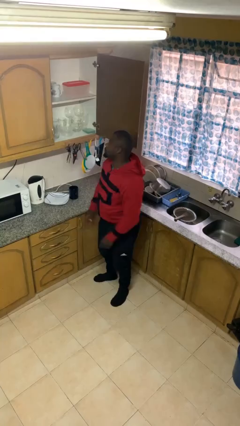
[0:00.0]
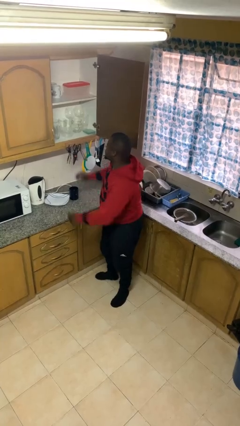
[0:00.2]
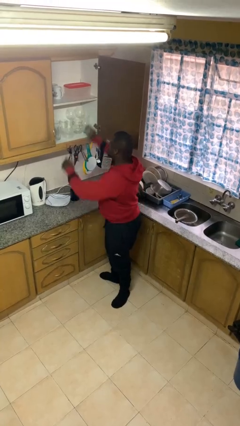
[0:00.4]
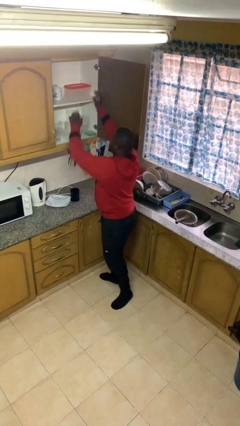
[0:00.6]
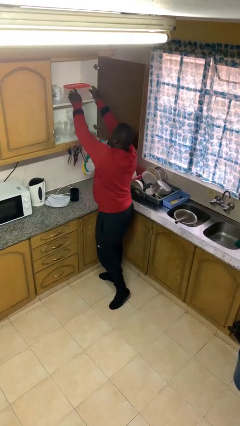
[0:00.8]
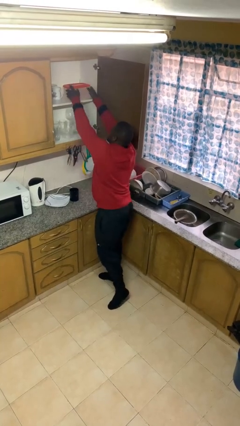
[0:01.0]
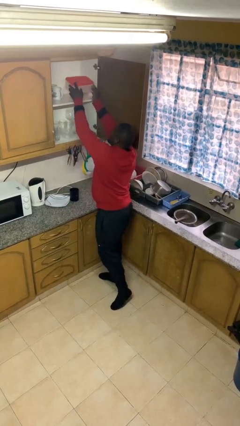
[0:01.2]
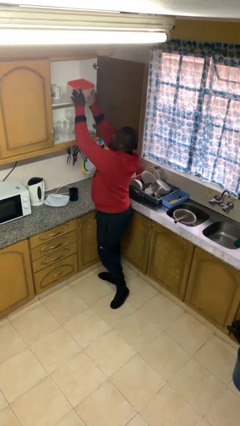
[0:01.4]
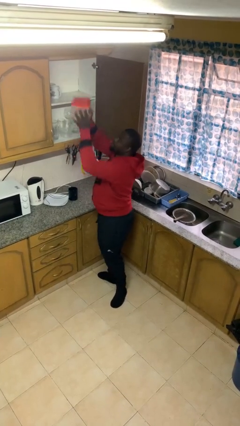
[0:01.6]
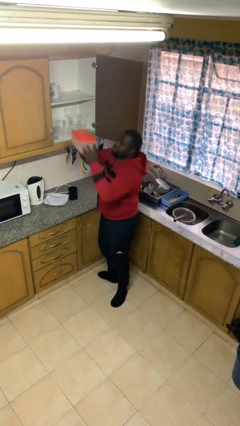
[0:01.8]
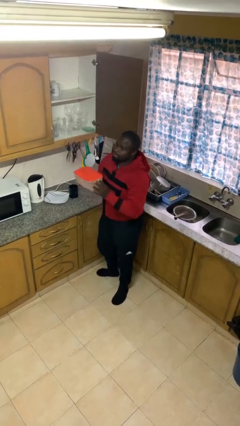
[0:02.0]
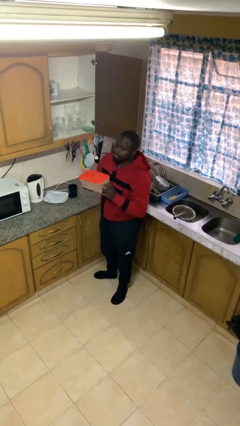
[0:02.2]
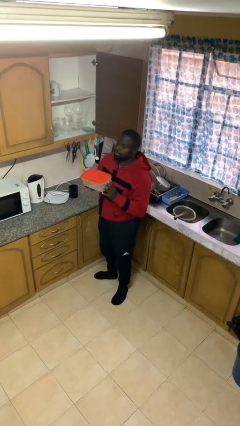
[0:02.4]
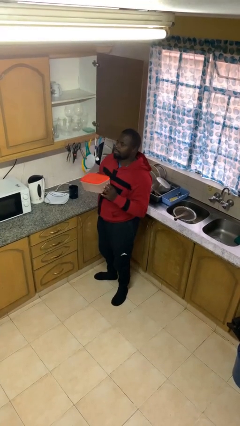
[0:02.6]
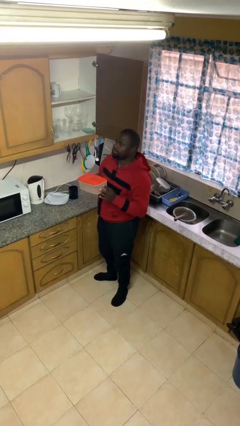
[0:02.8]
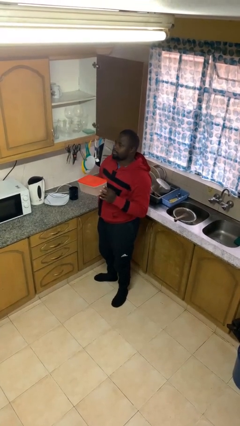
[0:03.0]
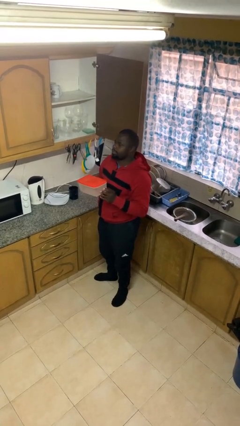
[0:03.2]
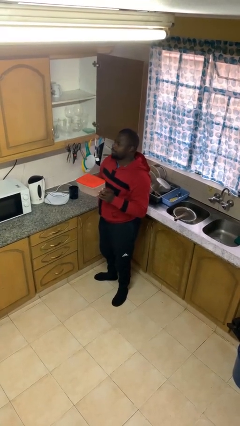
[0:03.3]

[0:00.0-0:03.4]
person picks up object from cabinet

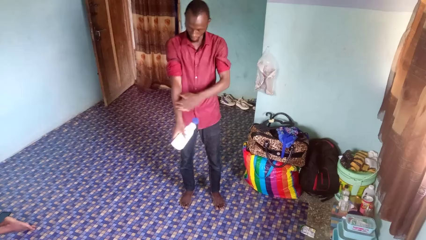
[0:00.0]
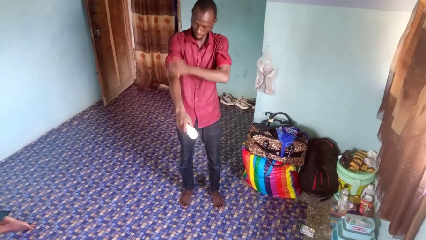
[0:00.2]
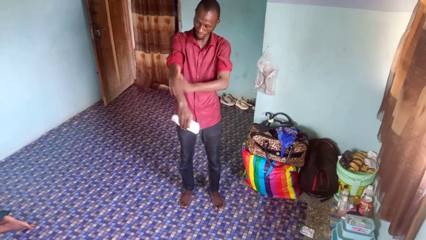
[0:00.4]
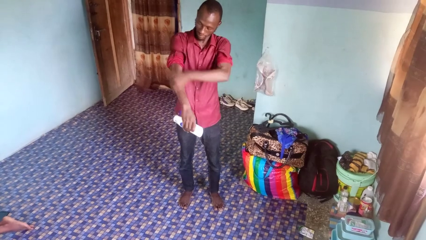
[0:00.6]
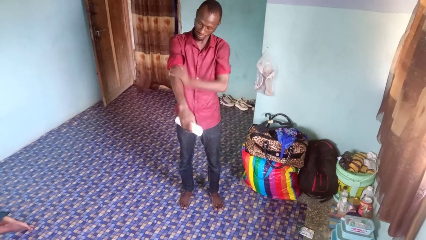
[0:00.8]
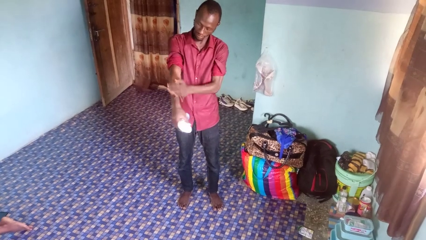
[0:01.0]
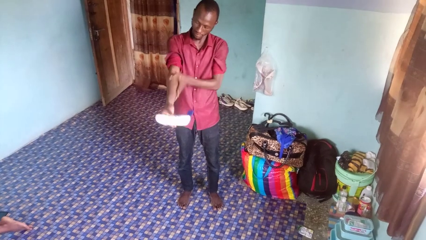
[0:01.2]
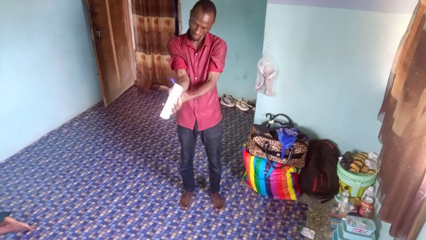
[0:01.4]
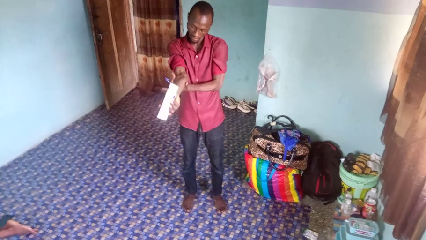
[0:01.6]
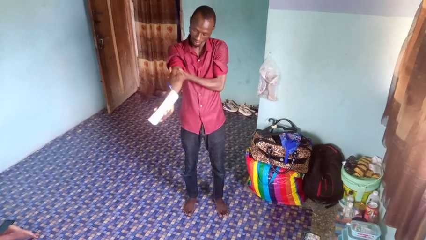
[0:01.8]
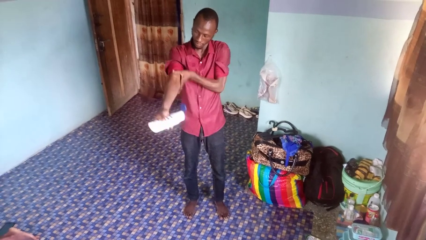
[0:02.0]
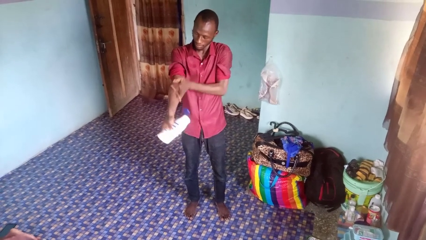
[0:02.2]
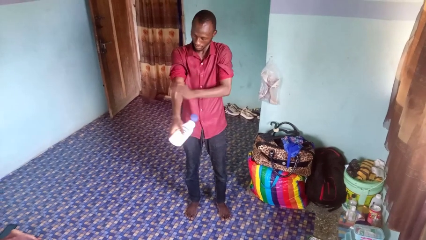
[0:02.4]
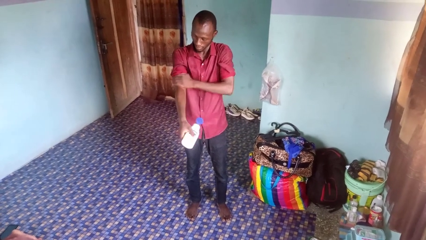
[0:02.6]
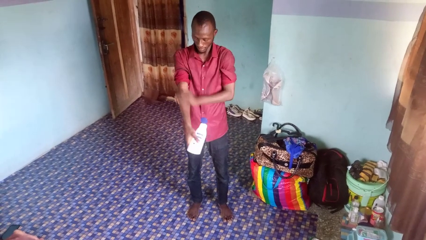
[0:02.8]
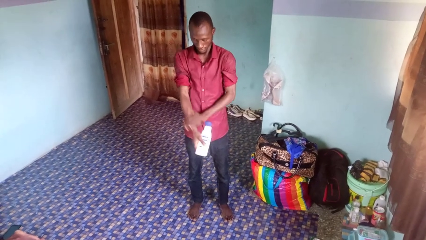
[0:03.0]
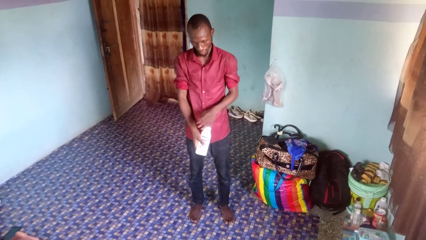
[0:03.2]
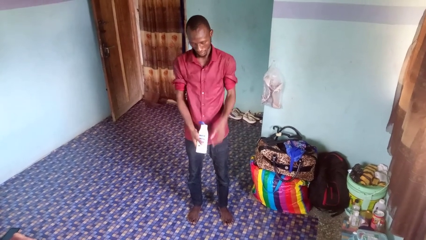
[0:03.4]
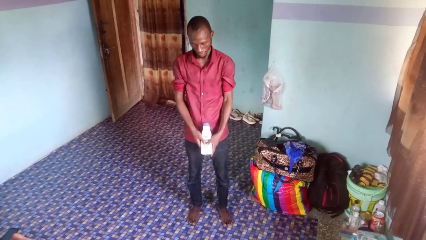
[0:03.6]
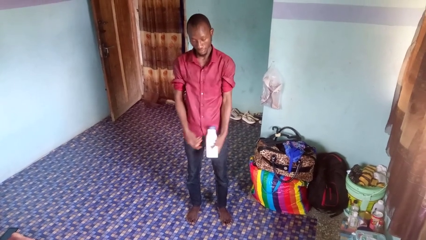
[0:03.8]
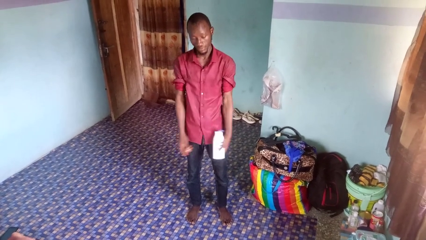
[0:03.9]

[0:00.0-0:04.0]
person applies sunscreen

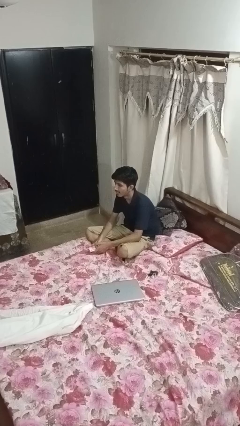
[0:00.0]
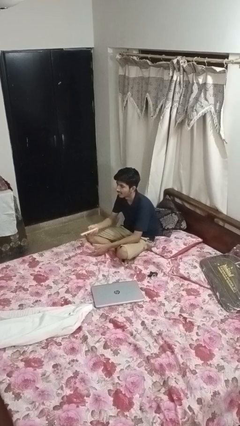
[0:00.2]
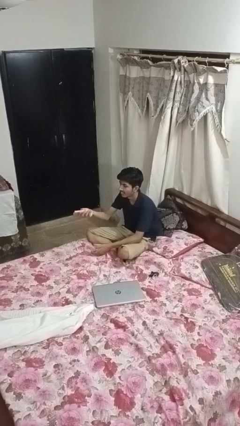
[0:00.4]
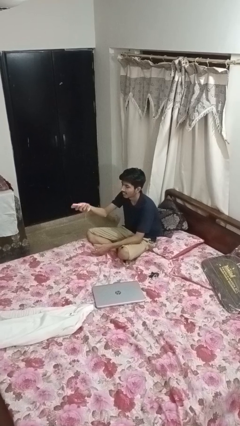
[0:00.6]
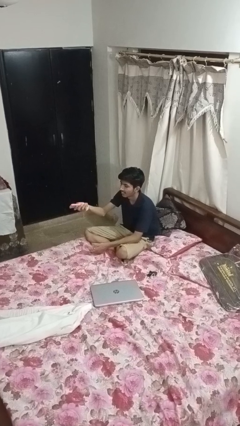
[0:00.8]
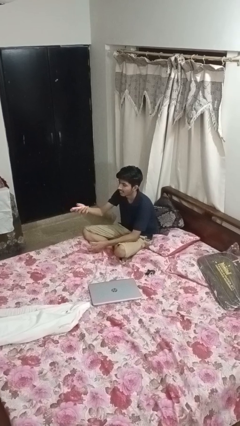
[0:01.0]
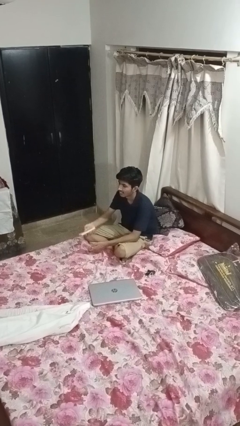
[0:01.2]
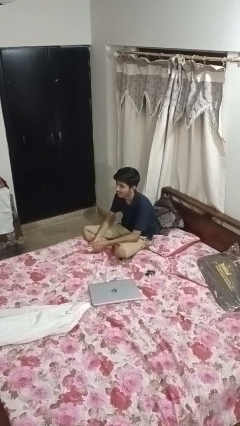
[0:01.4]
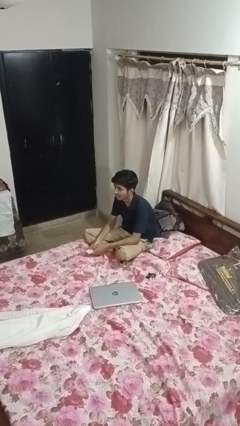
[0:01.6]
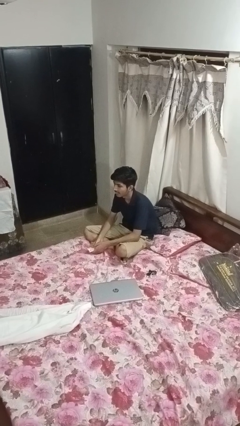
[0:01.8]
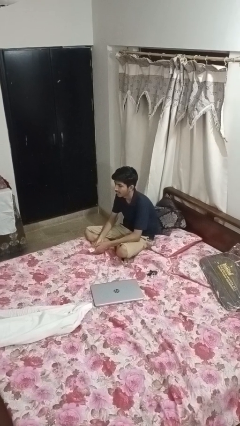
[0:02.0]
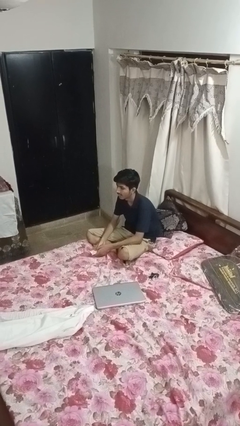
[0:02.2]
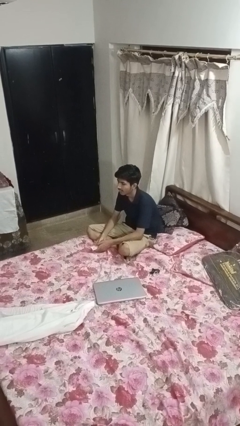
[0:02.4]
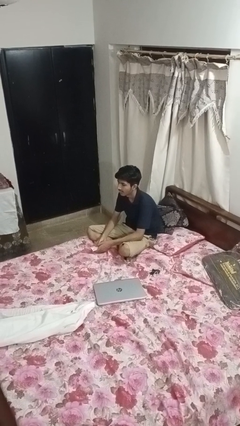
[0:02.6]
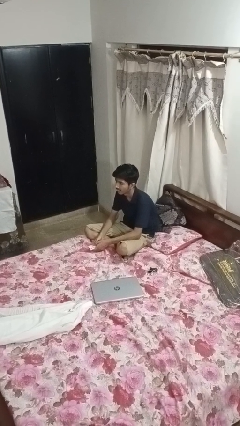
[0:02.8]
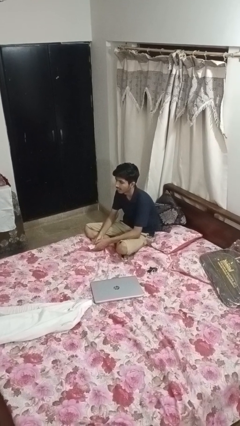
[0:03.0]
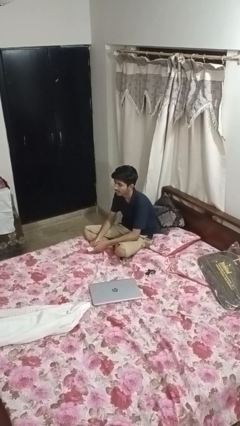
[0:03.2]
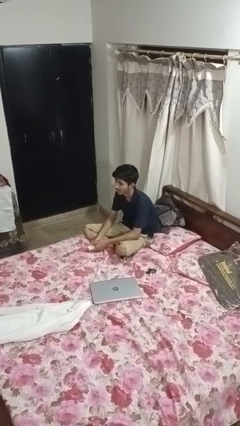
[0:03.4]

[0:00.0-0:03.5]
person uses television remote

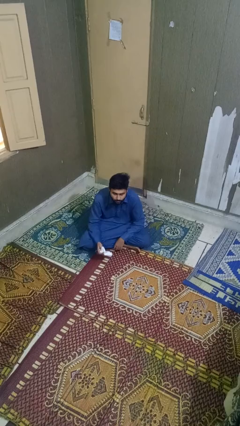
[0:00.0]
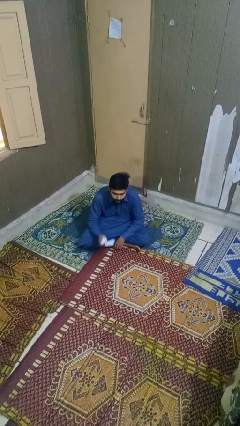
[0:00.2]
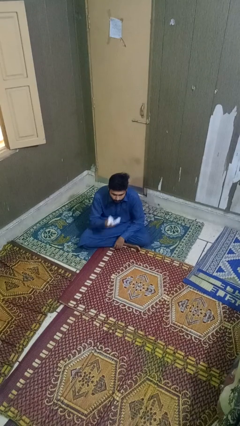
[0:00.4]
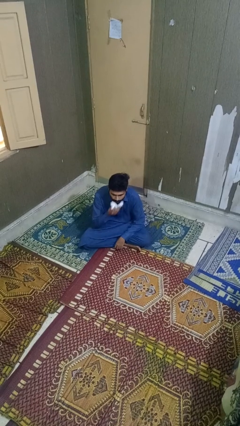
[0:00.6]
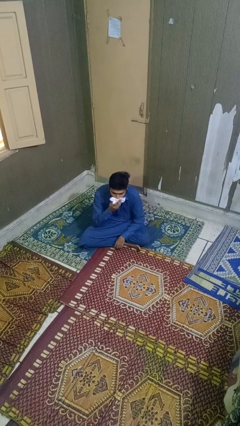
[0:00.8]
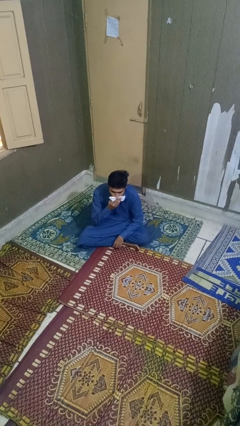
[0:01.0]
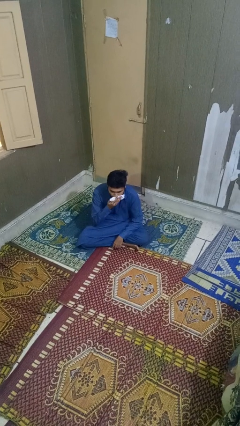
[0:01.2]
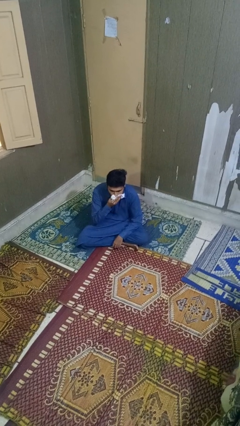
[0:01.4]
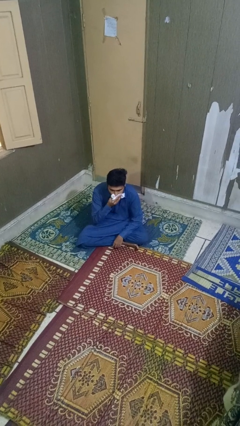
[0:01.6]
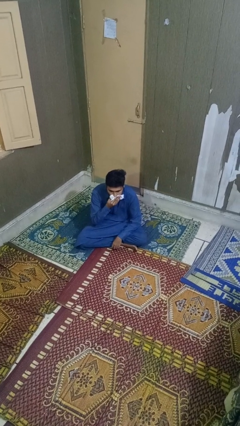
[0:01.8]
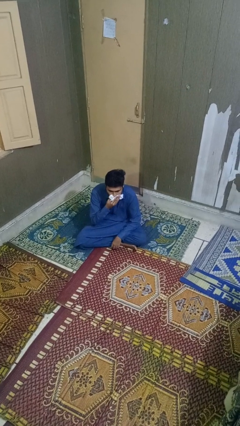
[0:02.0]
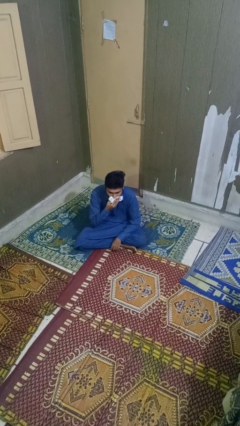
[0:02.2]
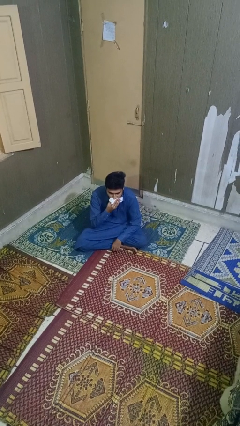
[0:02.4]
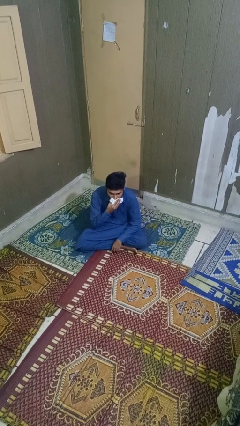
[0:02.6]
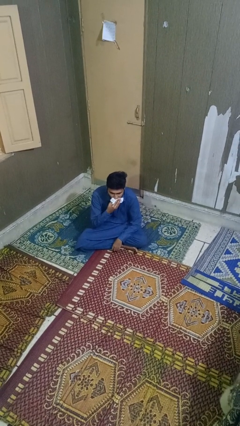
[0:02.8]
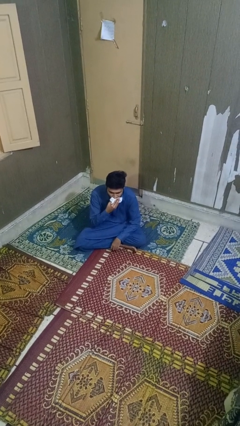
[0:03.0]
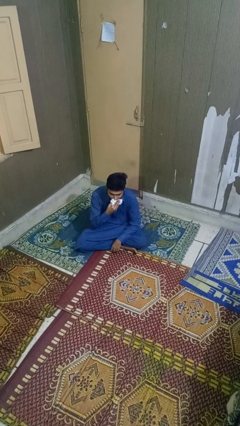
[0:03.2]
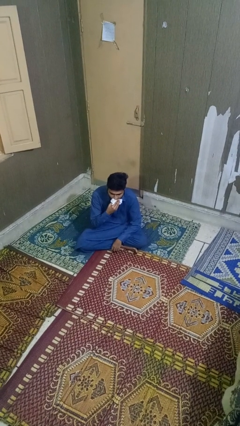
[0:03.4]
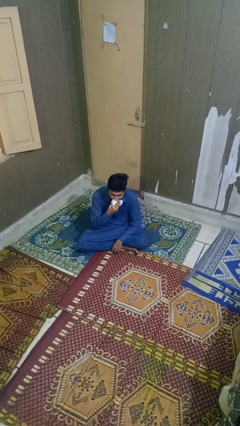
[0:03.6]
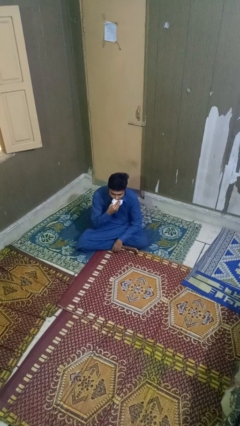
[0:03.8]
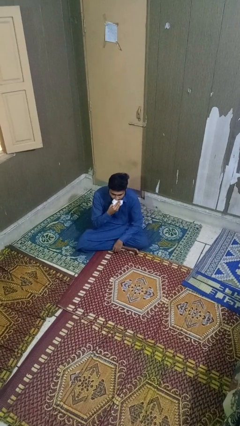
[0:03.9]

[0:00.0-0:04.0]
person wipes mouth with napkin

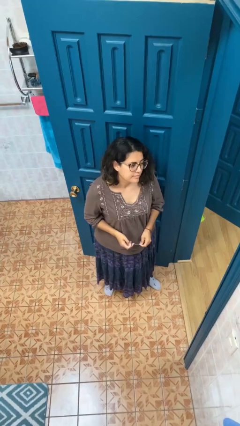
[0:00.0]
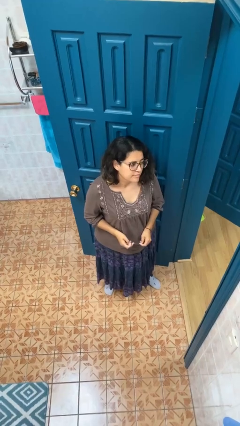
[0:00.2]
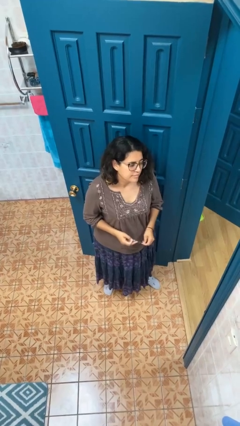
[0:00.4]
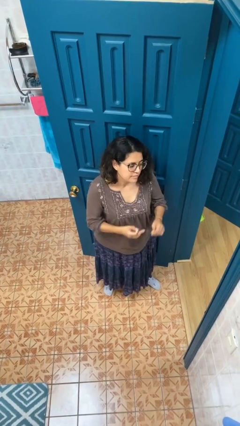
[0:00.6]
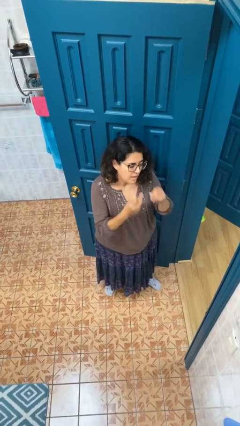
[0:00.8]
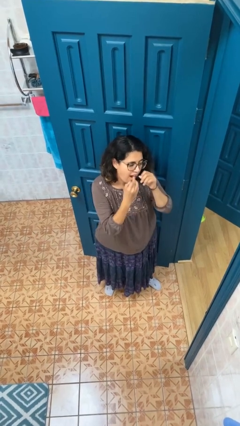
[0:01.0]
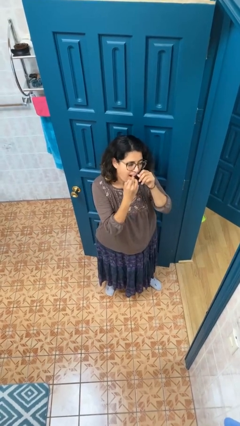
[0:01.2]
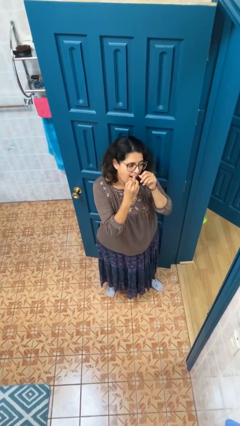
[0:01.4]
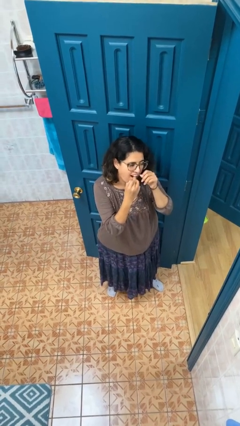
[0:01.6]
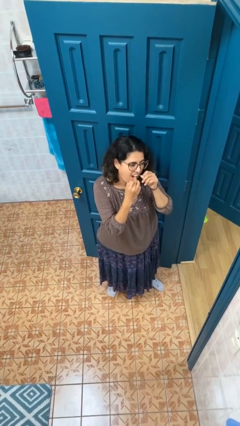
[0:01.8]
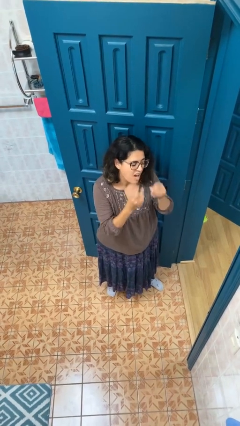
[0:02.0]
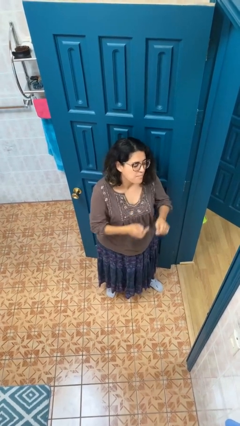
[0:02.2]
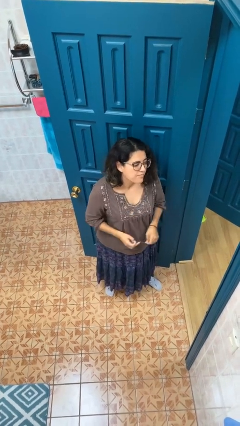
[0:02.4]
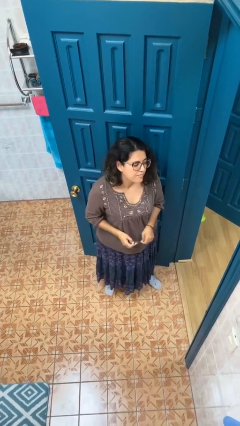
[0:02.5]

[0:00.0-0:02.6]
person flosses

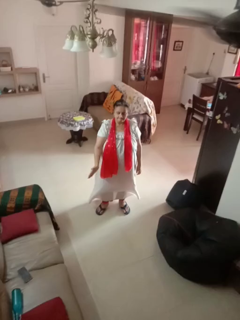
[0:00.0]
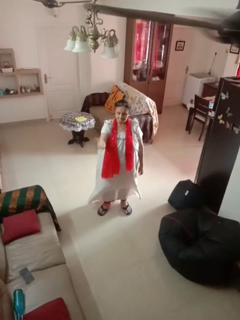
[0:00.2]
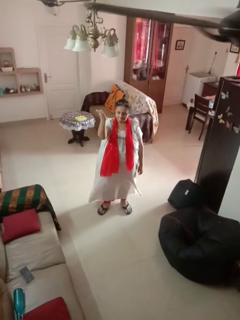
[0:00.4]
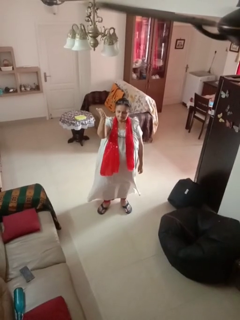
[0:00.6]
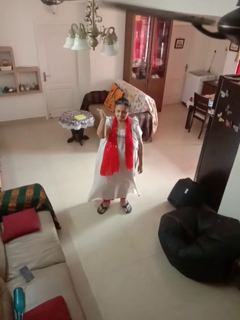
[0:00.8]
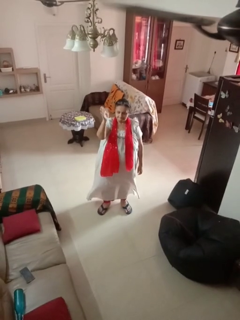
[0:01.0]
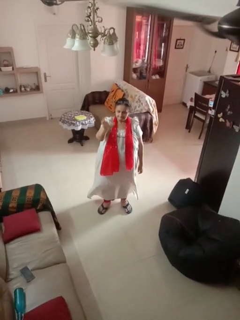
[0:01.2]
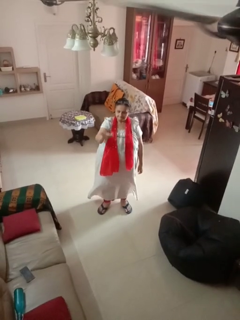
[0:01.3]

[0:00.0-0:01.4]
person gestures swipe up
